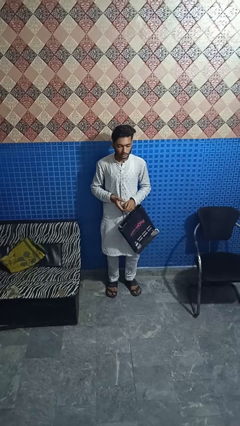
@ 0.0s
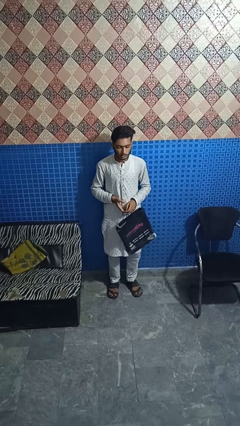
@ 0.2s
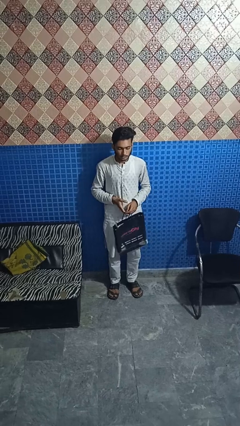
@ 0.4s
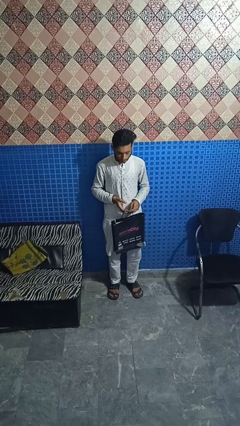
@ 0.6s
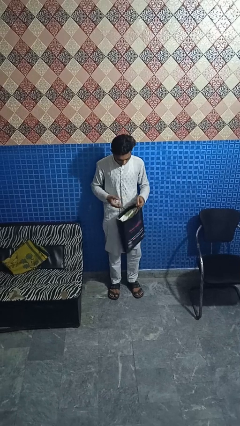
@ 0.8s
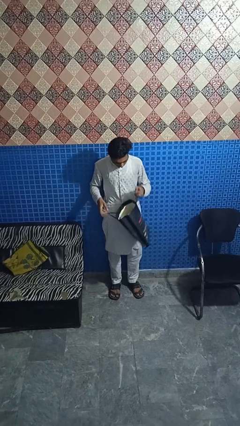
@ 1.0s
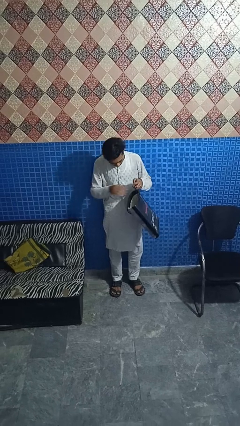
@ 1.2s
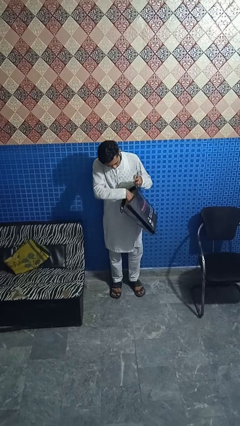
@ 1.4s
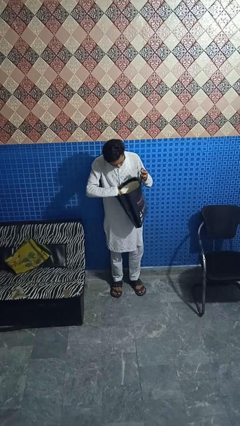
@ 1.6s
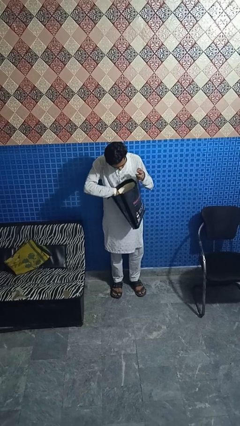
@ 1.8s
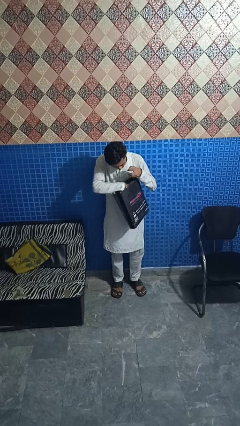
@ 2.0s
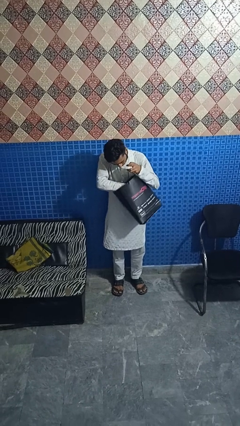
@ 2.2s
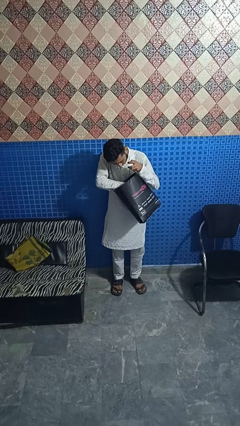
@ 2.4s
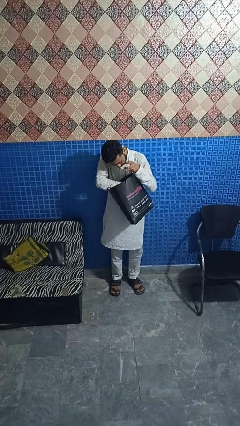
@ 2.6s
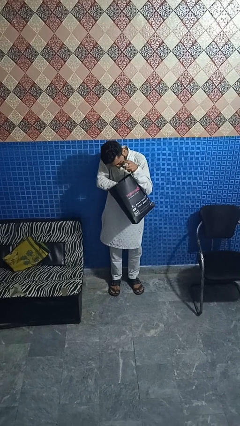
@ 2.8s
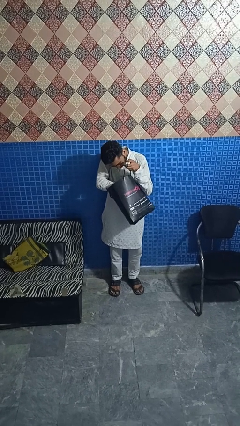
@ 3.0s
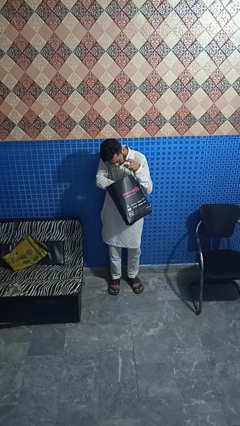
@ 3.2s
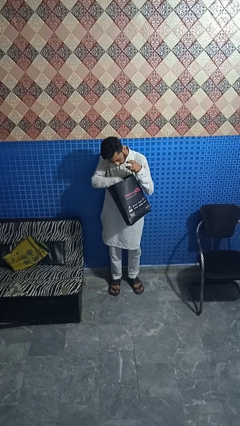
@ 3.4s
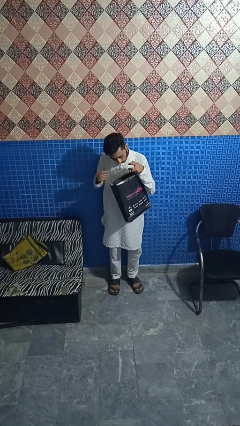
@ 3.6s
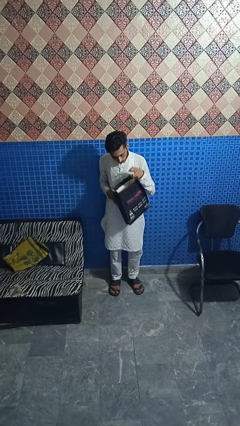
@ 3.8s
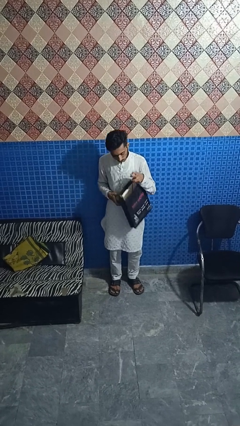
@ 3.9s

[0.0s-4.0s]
person searches in bag

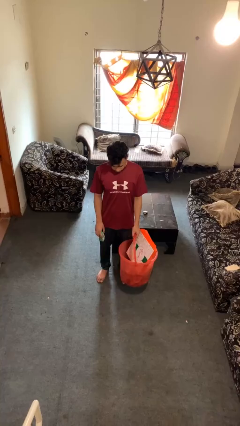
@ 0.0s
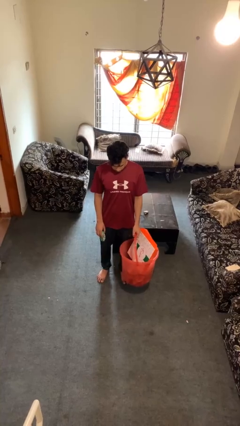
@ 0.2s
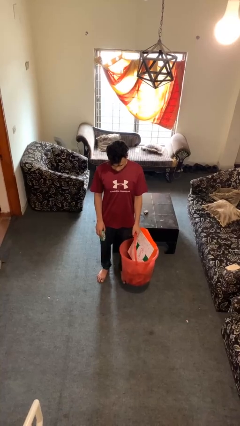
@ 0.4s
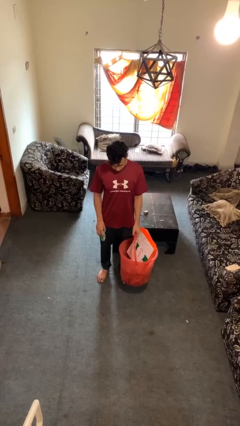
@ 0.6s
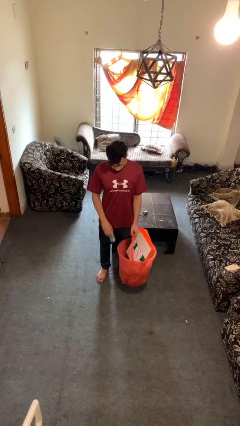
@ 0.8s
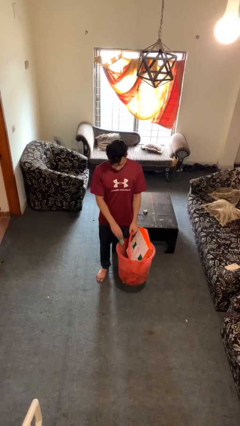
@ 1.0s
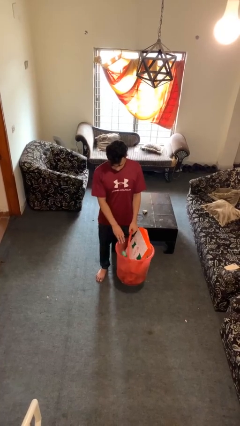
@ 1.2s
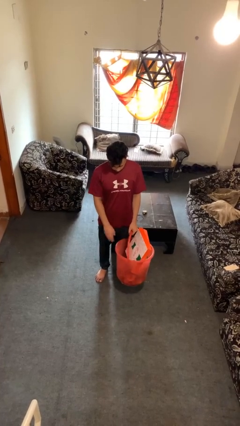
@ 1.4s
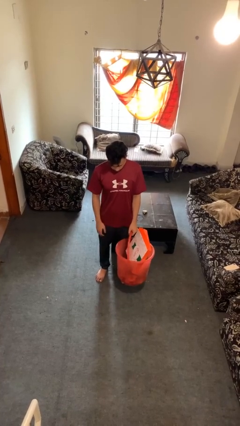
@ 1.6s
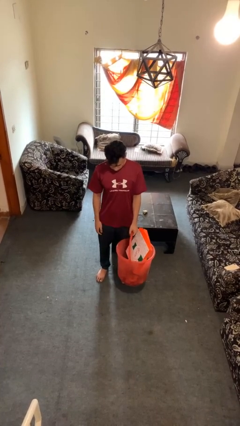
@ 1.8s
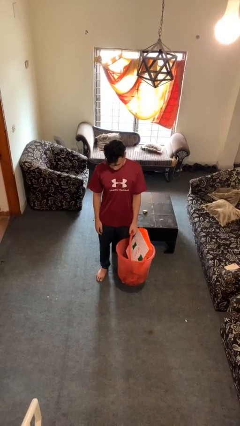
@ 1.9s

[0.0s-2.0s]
person puts object into basket

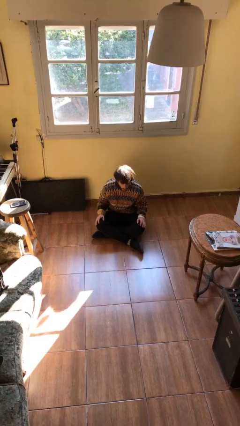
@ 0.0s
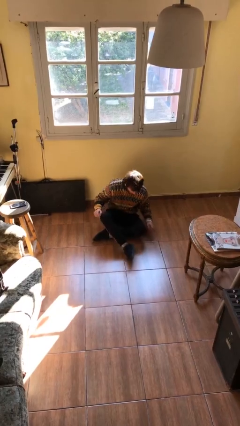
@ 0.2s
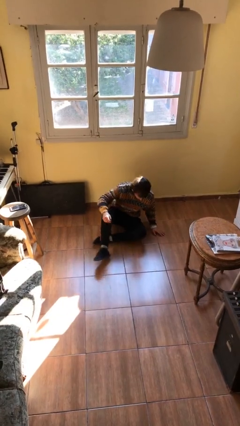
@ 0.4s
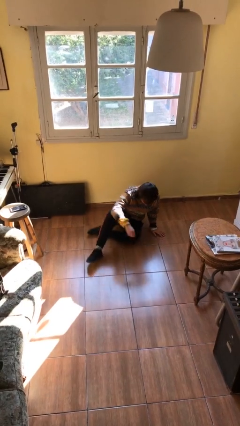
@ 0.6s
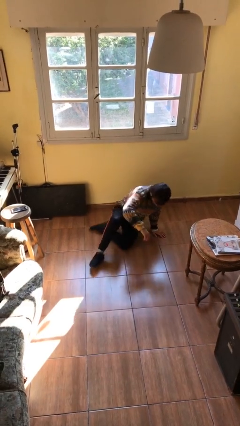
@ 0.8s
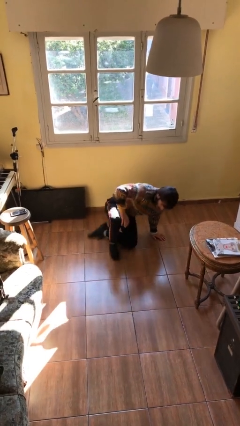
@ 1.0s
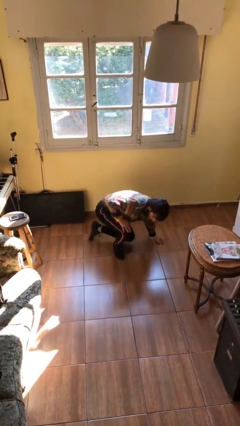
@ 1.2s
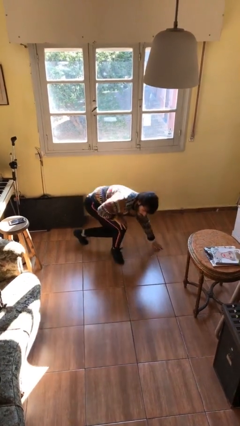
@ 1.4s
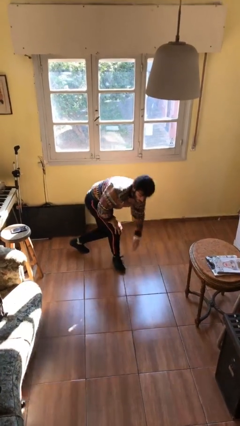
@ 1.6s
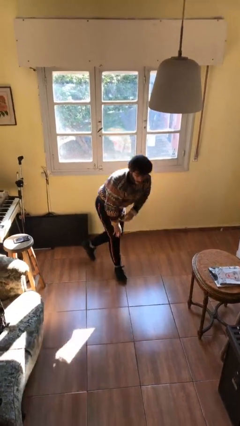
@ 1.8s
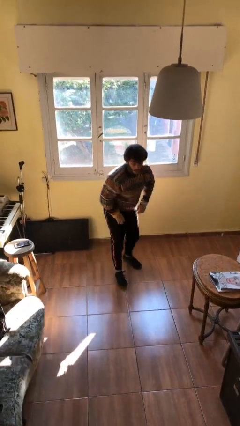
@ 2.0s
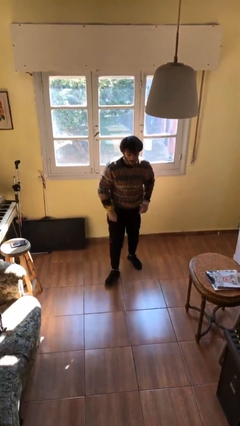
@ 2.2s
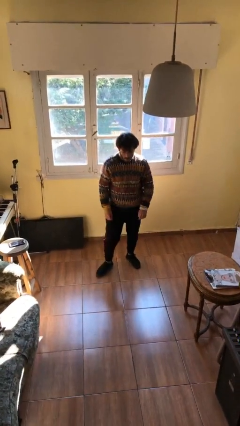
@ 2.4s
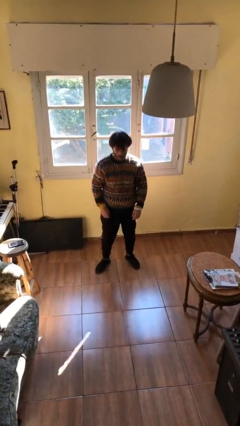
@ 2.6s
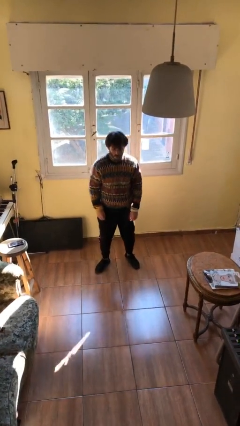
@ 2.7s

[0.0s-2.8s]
person stands up from floor

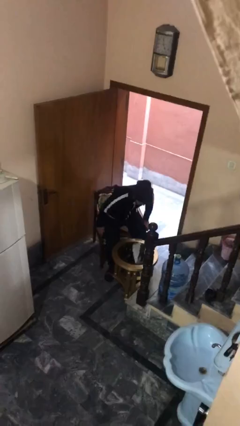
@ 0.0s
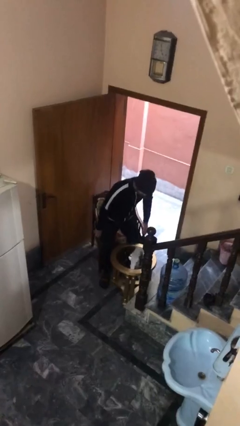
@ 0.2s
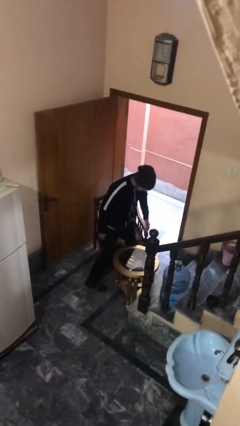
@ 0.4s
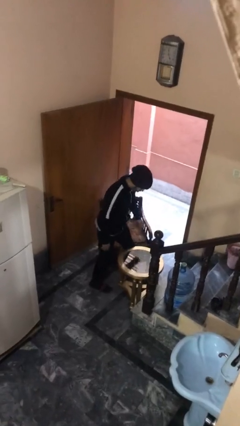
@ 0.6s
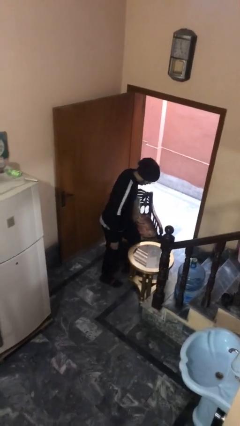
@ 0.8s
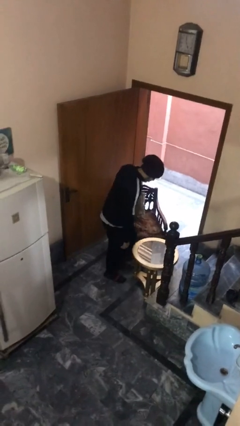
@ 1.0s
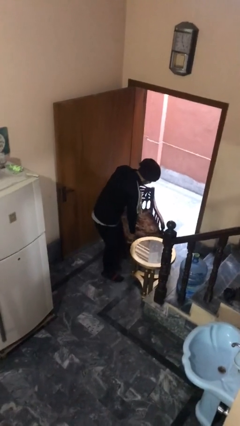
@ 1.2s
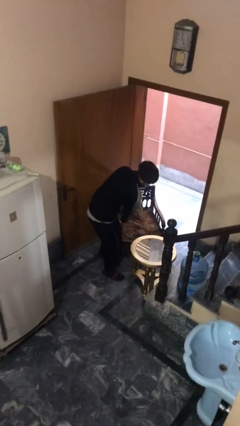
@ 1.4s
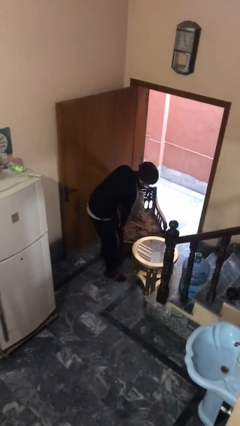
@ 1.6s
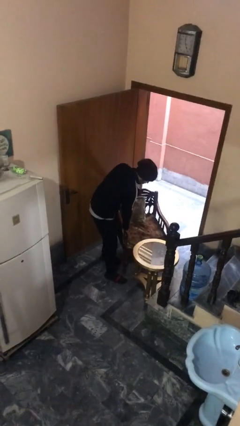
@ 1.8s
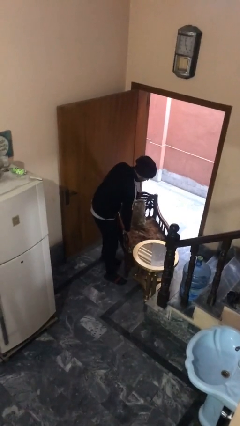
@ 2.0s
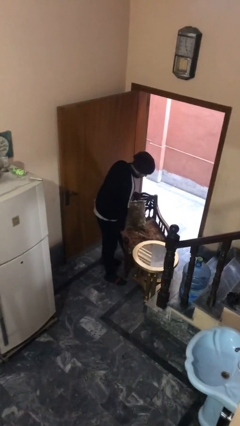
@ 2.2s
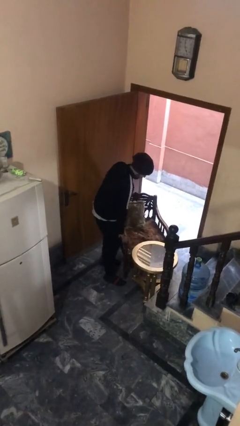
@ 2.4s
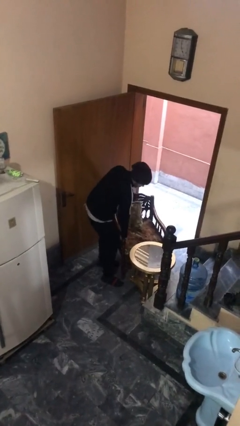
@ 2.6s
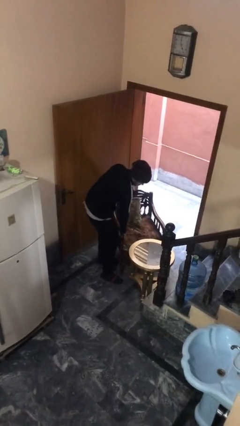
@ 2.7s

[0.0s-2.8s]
person stands up

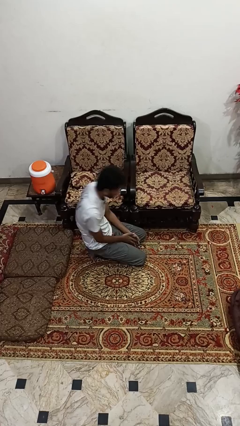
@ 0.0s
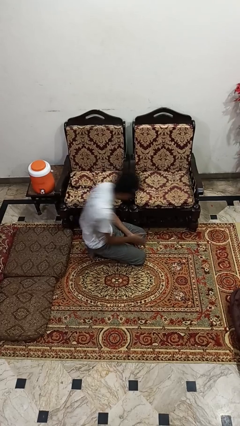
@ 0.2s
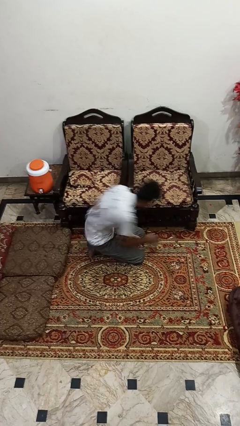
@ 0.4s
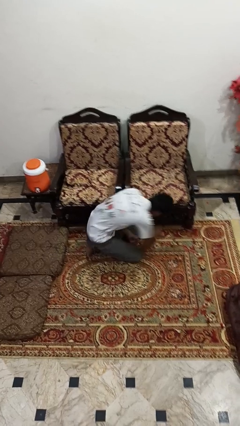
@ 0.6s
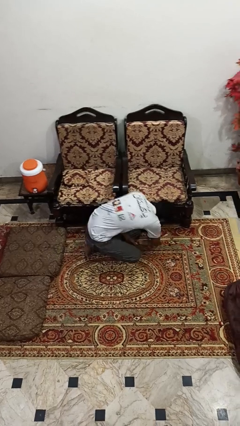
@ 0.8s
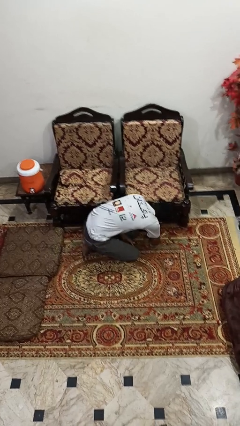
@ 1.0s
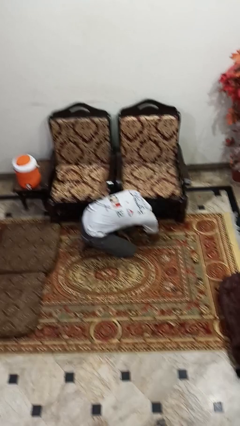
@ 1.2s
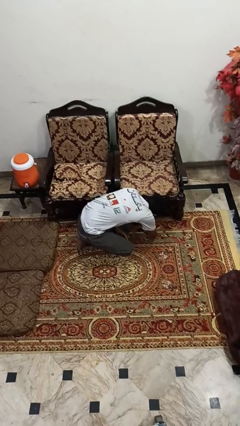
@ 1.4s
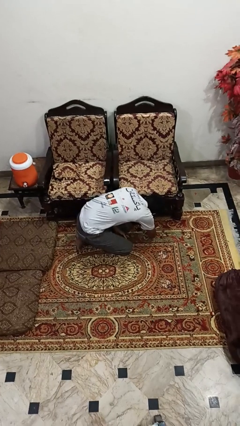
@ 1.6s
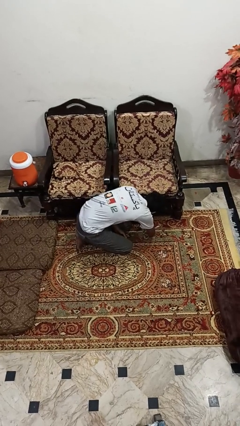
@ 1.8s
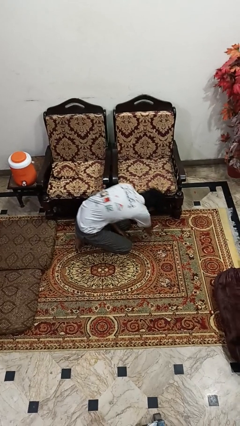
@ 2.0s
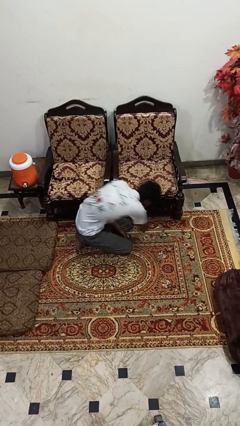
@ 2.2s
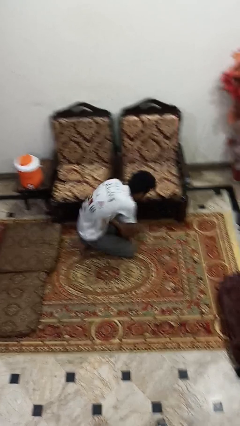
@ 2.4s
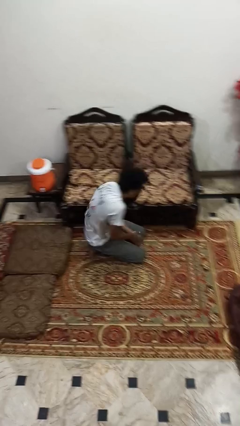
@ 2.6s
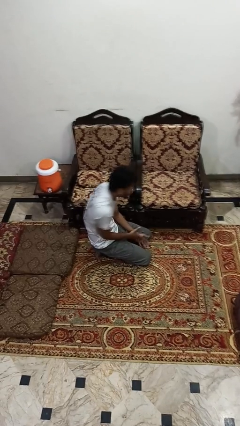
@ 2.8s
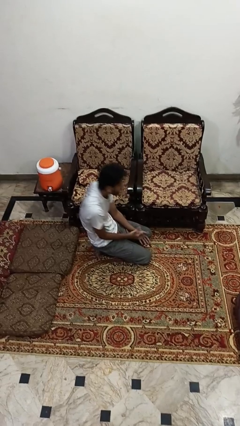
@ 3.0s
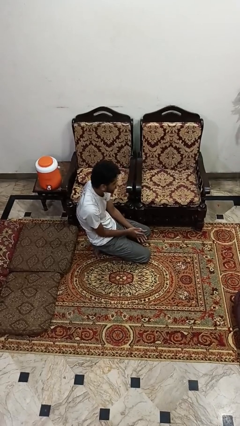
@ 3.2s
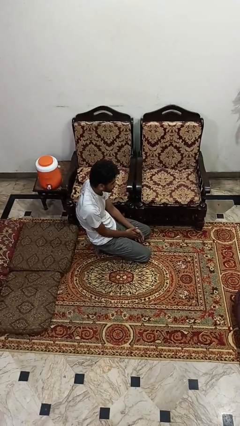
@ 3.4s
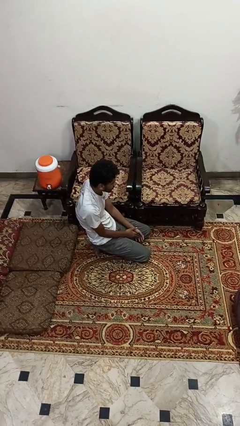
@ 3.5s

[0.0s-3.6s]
person searches under couch

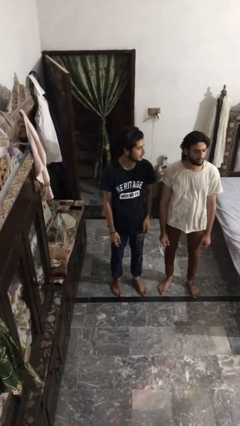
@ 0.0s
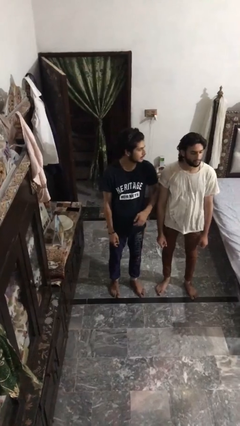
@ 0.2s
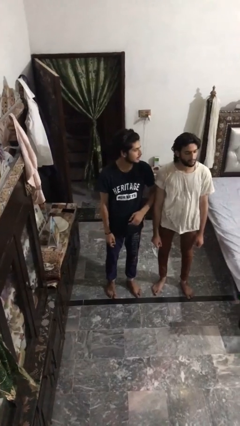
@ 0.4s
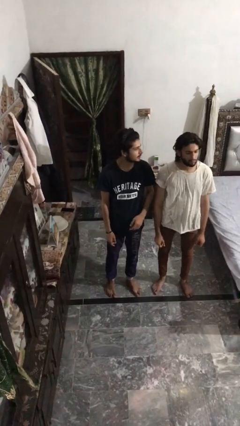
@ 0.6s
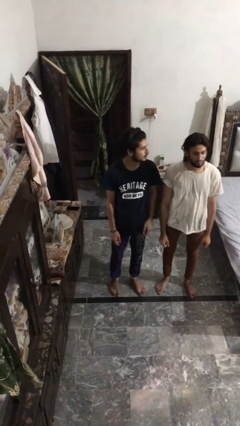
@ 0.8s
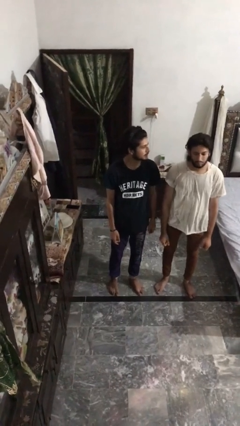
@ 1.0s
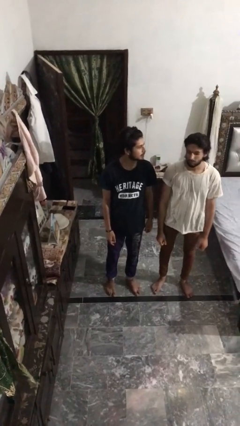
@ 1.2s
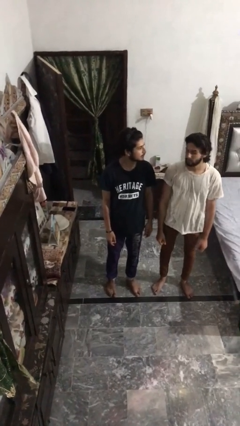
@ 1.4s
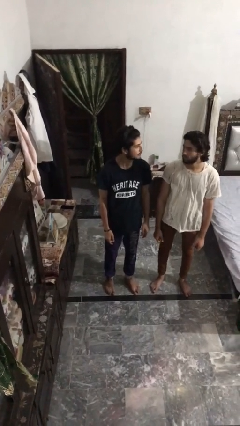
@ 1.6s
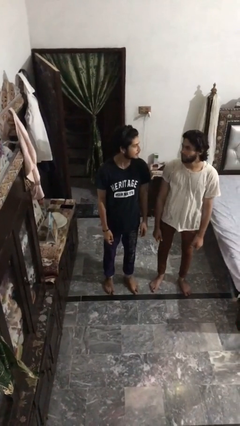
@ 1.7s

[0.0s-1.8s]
person nudges person with elbow
